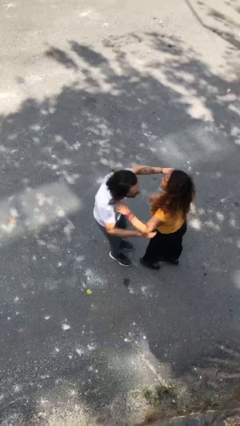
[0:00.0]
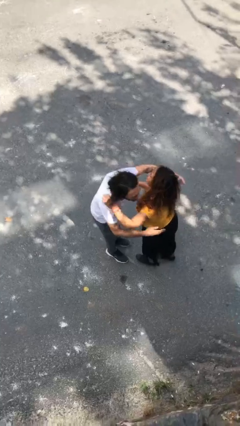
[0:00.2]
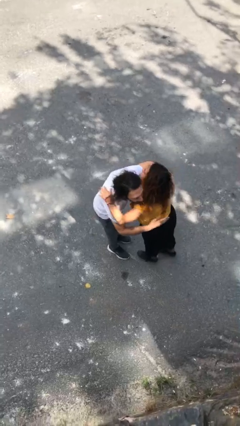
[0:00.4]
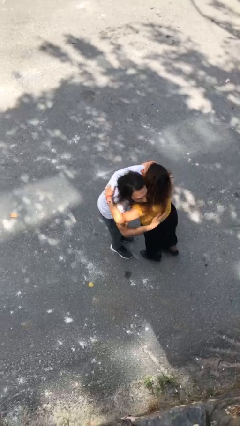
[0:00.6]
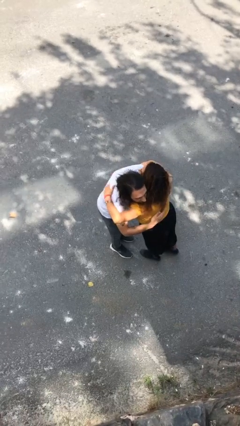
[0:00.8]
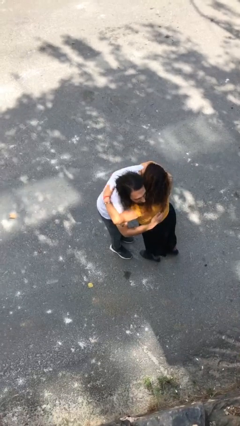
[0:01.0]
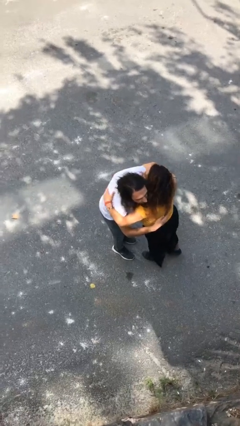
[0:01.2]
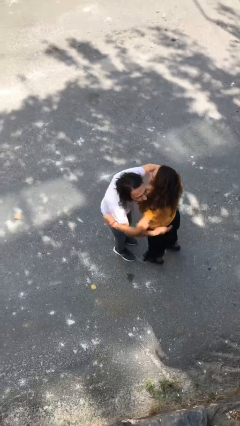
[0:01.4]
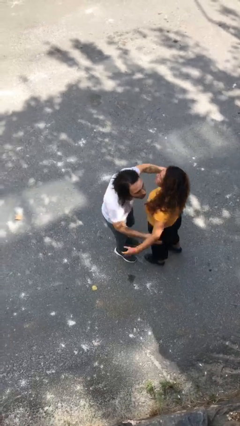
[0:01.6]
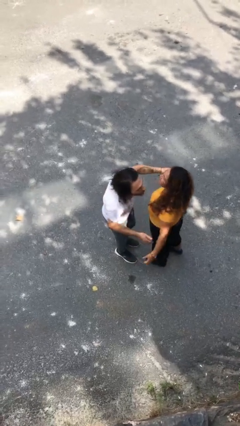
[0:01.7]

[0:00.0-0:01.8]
person embraces person

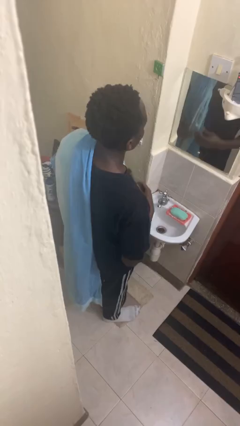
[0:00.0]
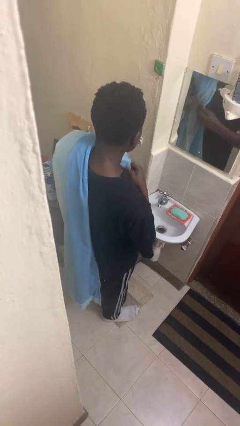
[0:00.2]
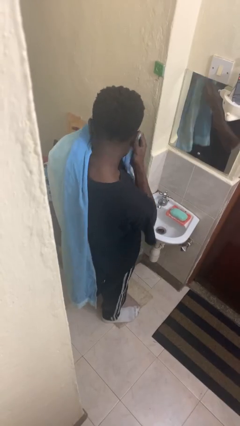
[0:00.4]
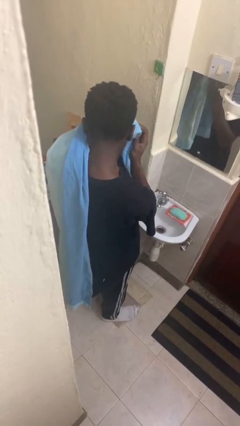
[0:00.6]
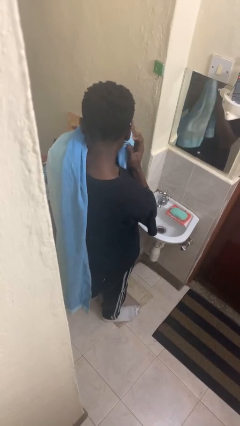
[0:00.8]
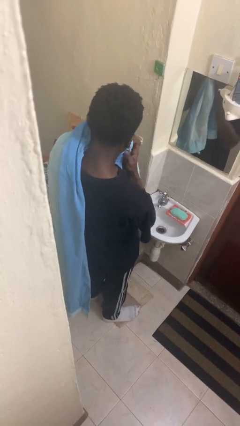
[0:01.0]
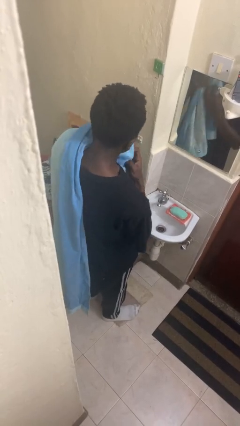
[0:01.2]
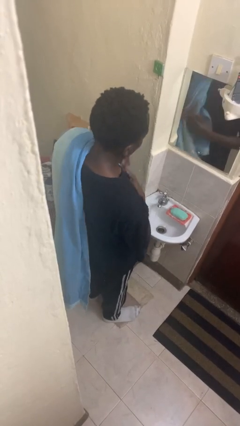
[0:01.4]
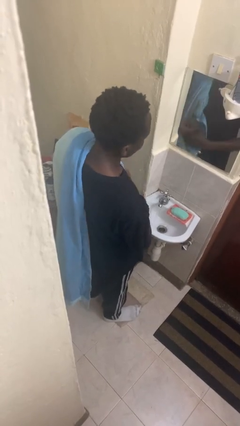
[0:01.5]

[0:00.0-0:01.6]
person dries face with towel

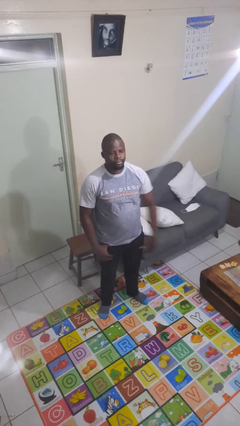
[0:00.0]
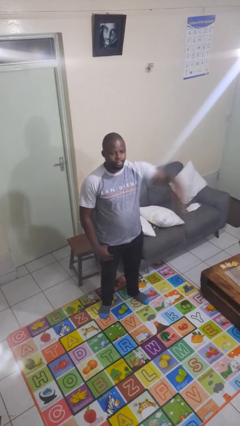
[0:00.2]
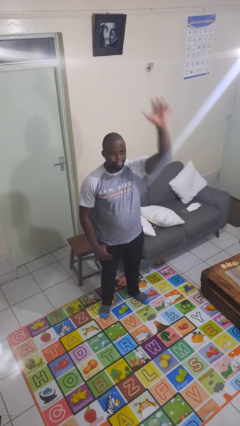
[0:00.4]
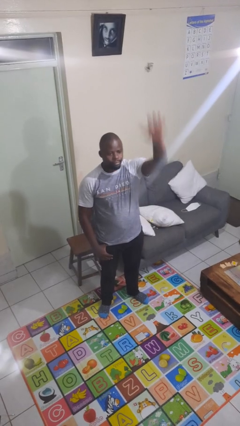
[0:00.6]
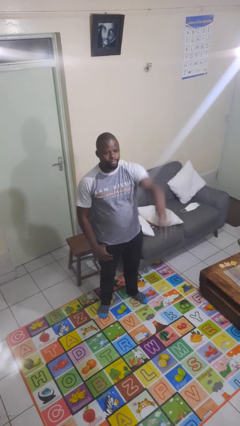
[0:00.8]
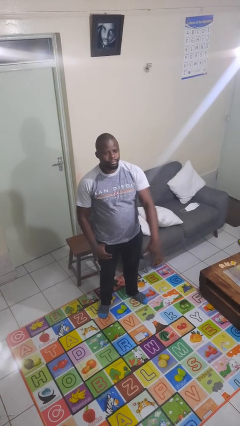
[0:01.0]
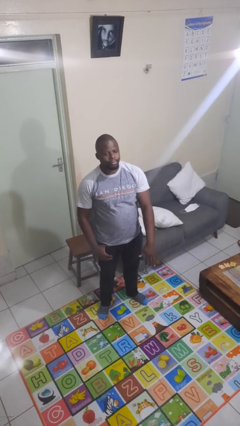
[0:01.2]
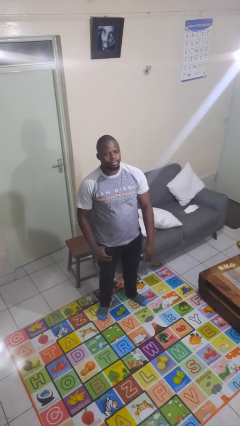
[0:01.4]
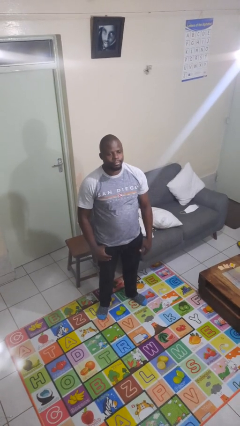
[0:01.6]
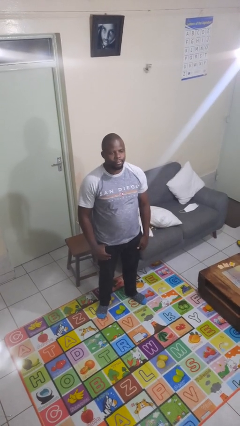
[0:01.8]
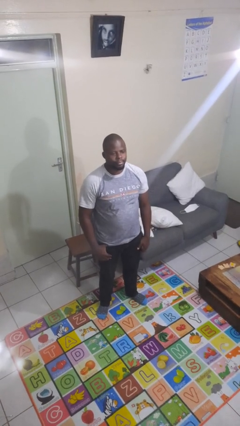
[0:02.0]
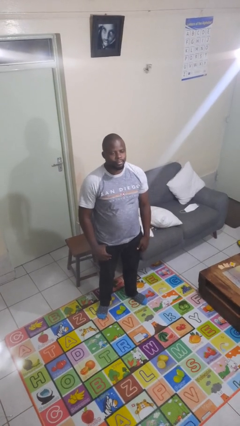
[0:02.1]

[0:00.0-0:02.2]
person gestures swipe down

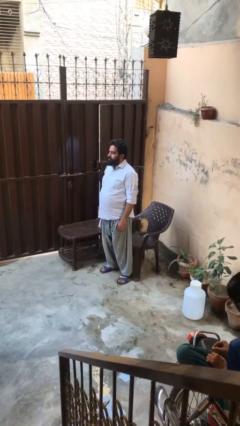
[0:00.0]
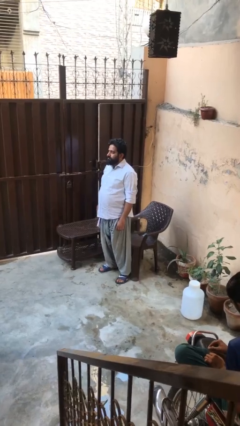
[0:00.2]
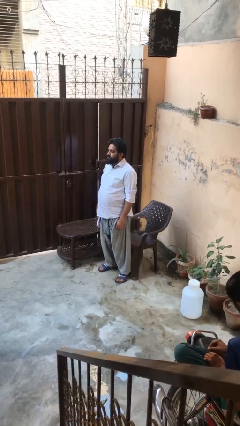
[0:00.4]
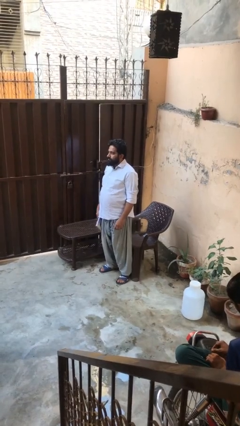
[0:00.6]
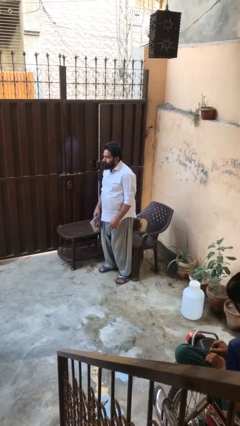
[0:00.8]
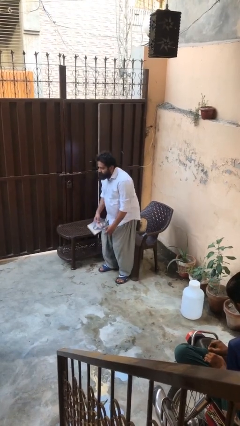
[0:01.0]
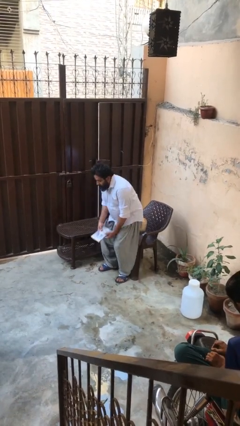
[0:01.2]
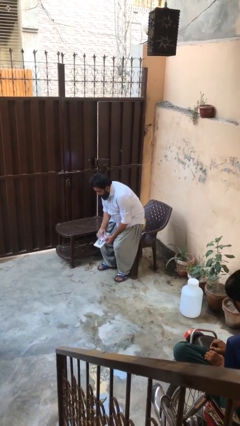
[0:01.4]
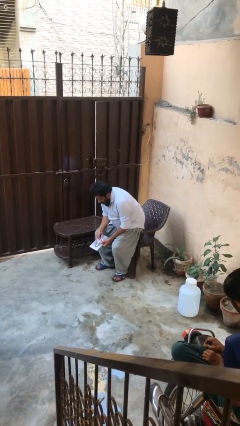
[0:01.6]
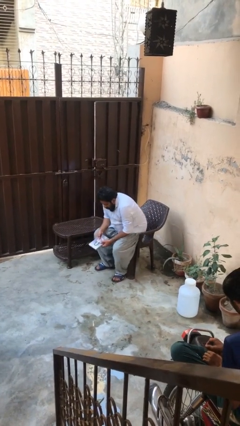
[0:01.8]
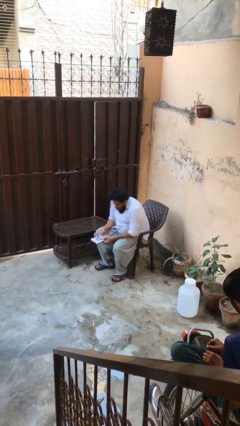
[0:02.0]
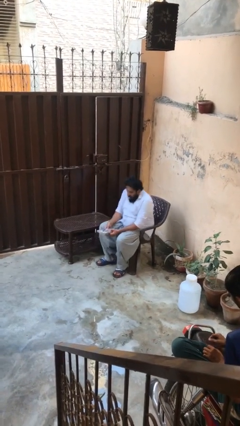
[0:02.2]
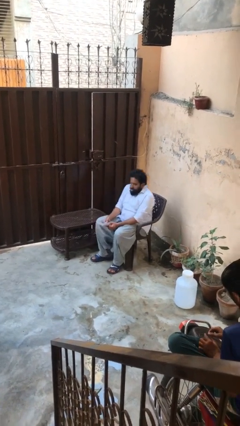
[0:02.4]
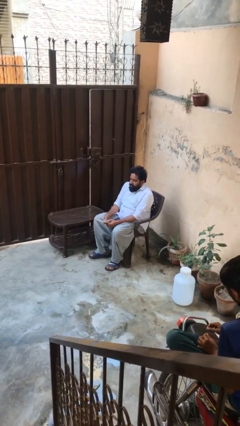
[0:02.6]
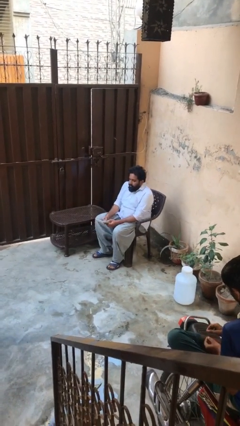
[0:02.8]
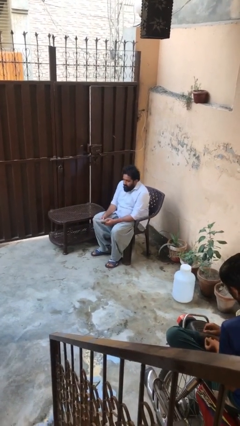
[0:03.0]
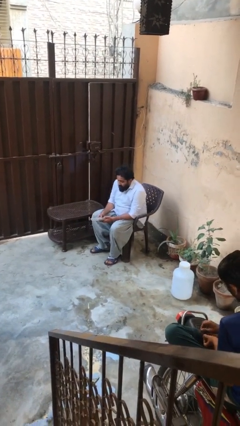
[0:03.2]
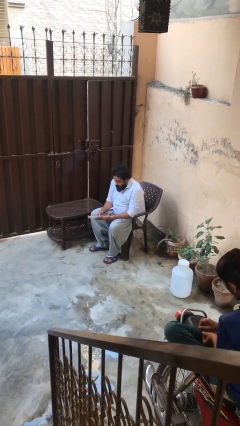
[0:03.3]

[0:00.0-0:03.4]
person sits down

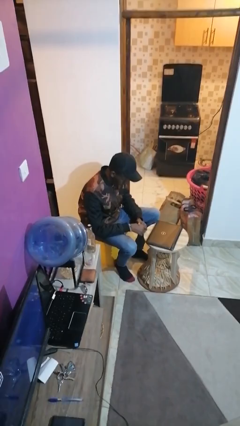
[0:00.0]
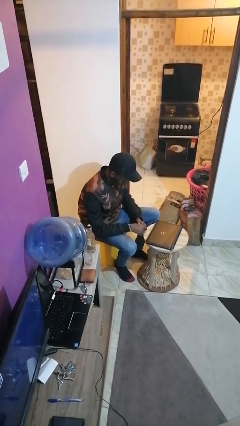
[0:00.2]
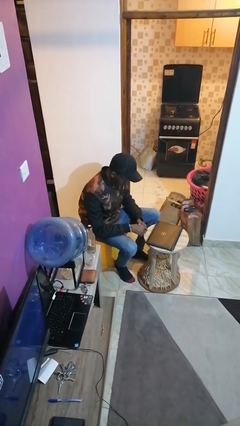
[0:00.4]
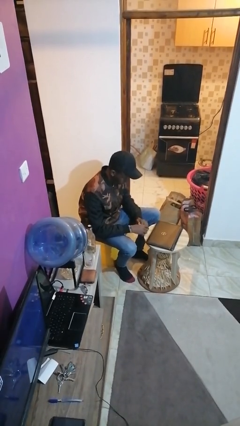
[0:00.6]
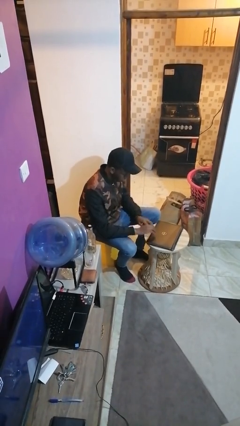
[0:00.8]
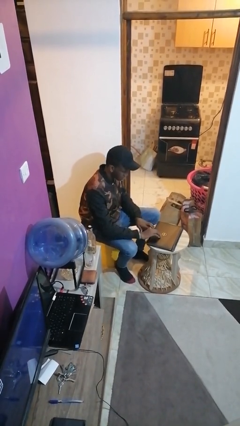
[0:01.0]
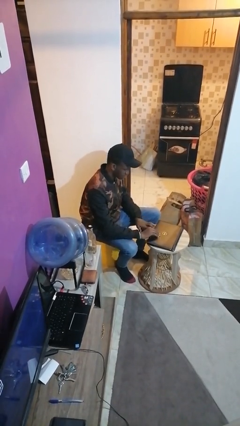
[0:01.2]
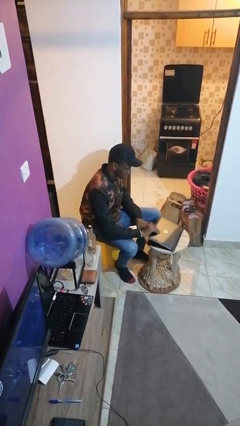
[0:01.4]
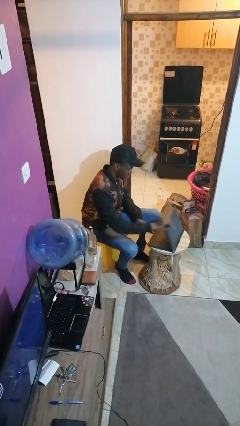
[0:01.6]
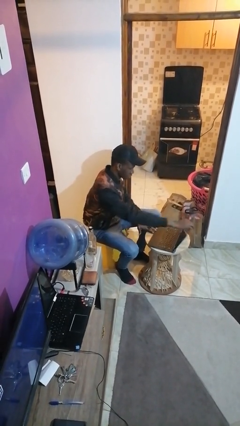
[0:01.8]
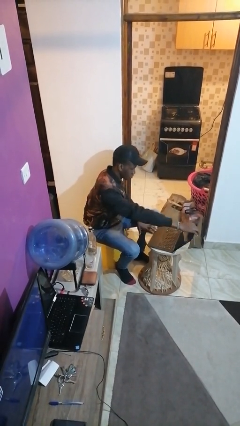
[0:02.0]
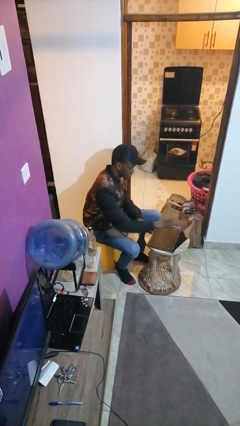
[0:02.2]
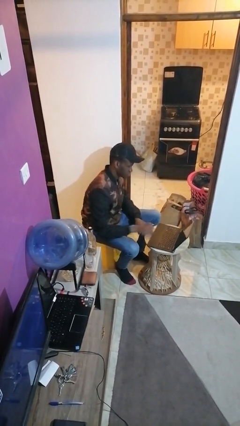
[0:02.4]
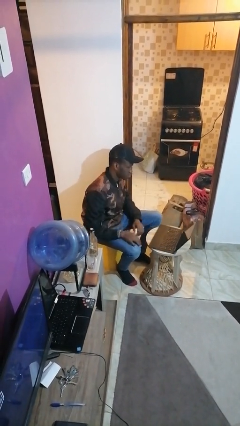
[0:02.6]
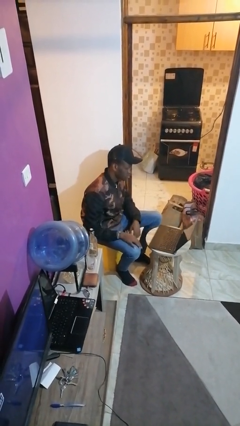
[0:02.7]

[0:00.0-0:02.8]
person opens laptop

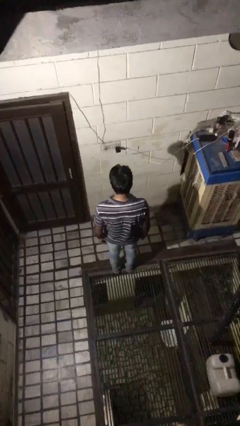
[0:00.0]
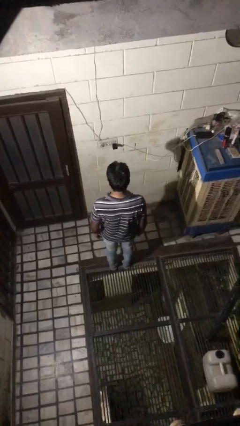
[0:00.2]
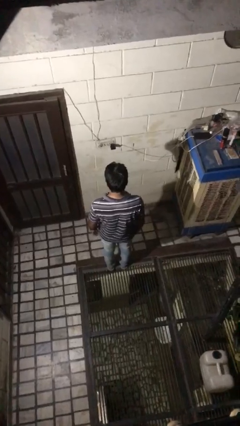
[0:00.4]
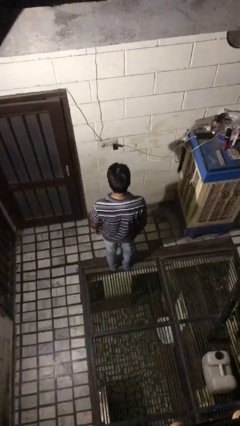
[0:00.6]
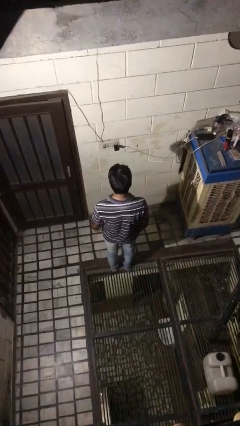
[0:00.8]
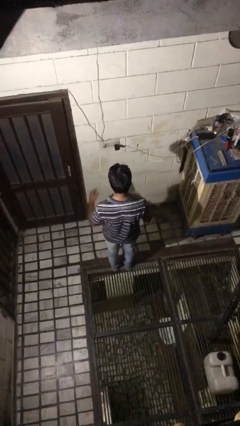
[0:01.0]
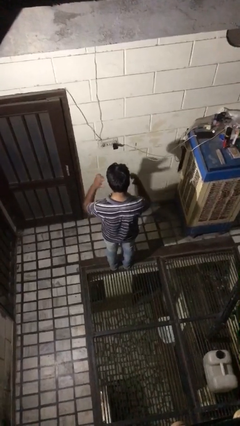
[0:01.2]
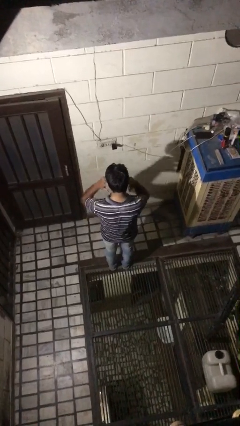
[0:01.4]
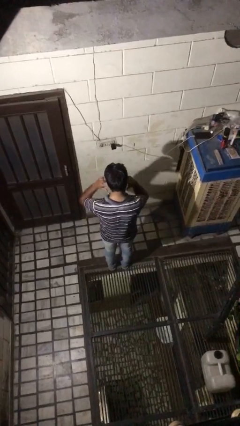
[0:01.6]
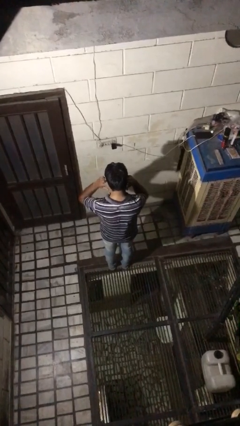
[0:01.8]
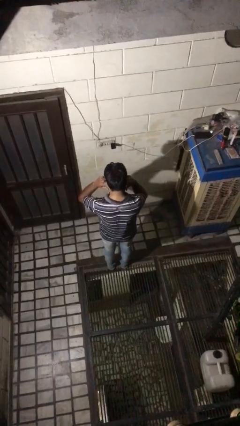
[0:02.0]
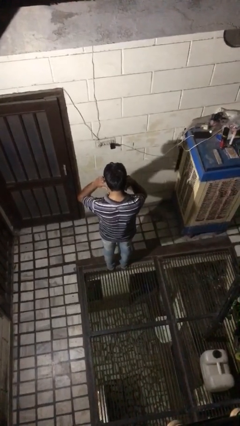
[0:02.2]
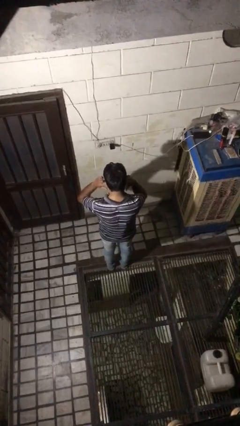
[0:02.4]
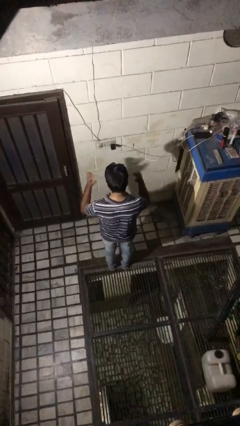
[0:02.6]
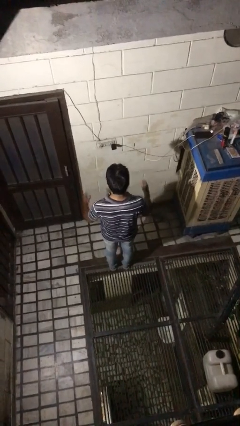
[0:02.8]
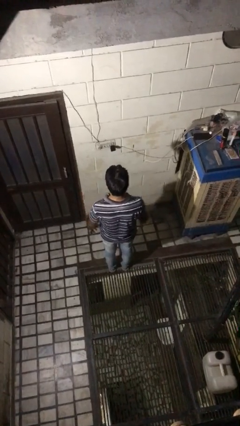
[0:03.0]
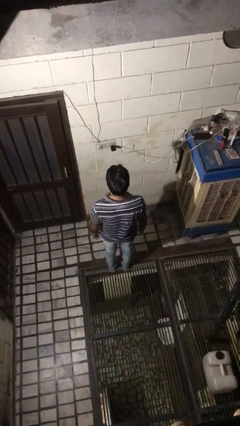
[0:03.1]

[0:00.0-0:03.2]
person puts fingers in ear

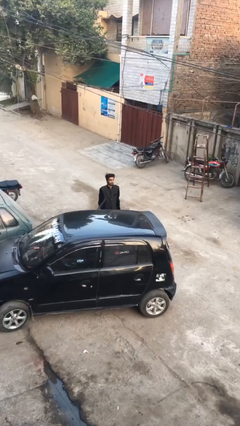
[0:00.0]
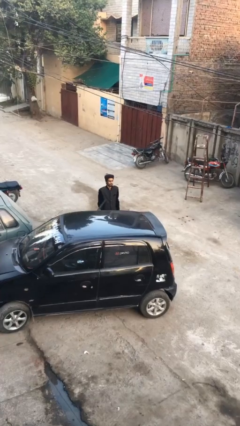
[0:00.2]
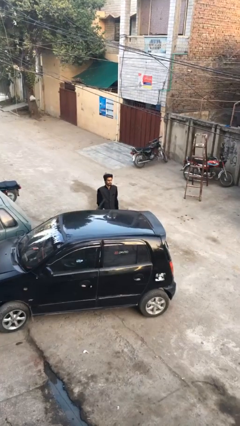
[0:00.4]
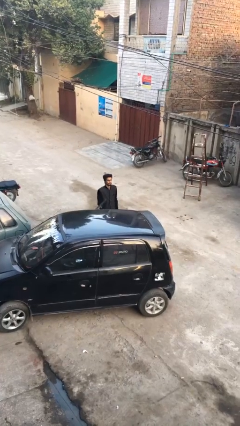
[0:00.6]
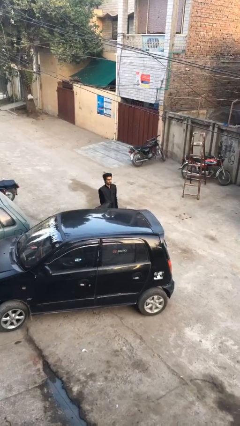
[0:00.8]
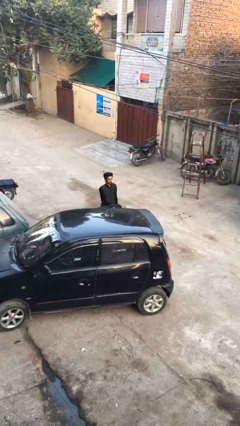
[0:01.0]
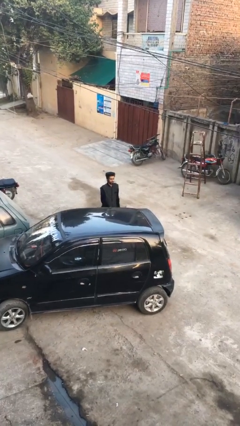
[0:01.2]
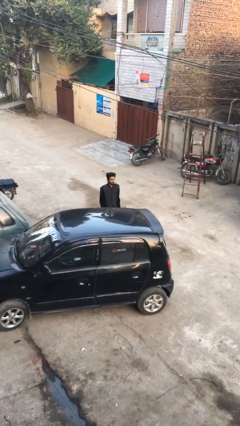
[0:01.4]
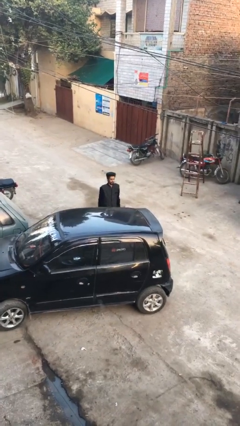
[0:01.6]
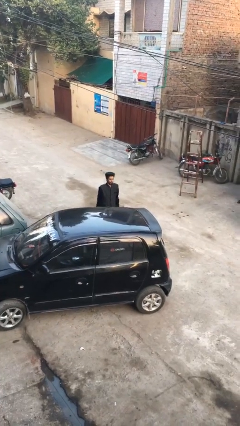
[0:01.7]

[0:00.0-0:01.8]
person closes car door
